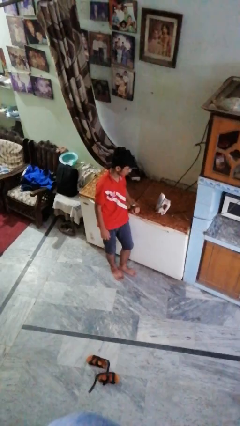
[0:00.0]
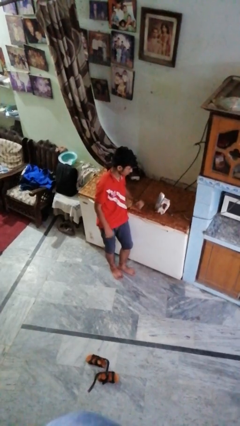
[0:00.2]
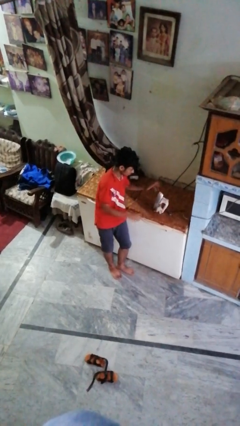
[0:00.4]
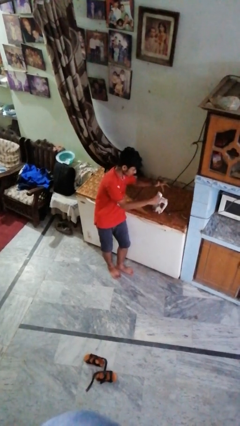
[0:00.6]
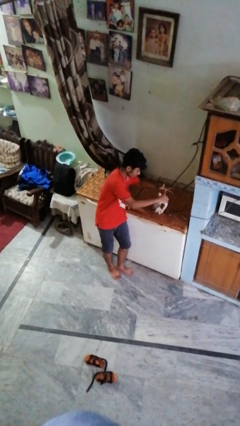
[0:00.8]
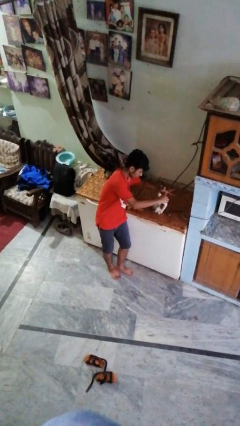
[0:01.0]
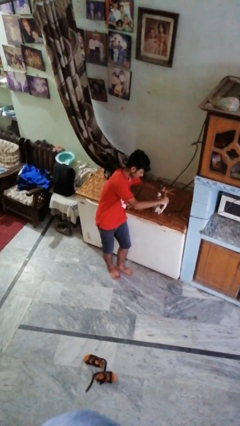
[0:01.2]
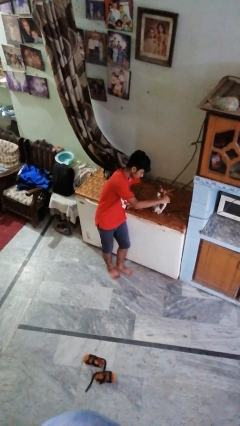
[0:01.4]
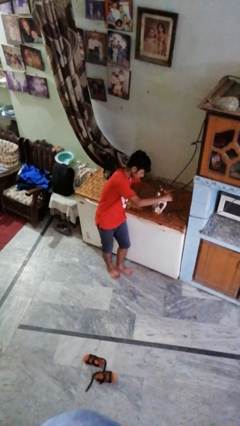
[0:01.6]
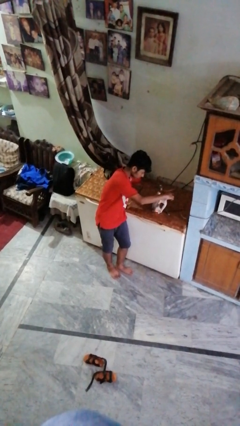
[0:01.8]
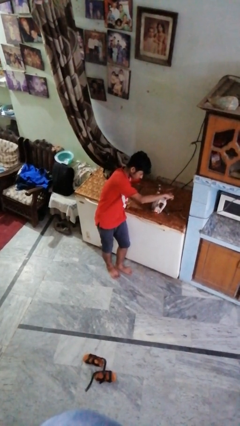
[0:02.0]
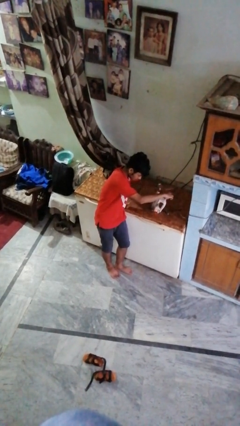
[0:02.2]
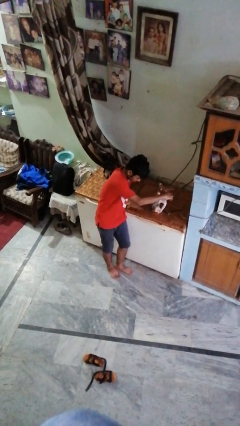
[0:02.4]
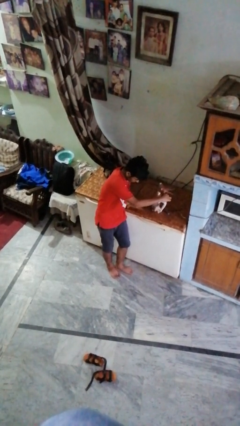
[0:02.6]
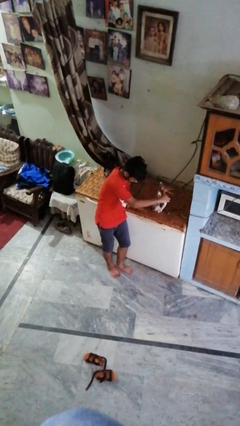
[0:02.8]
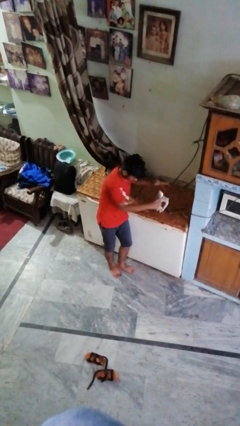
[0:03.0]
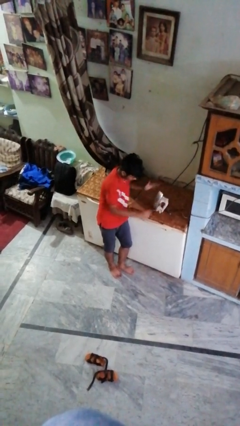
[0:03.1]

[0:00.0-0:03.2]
person adjusts thermostat

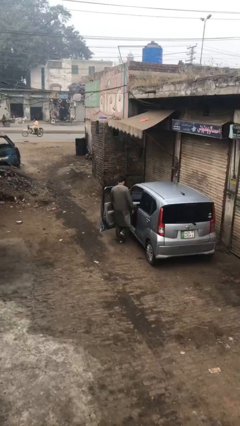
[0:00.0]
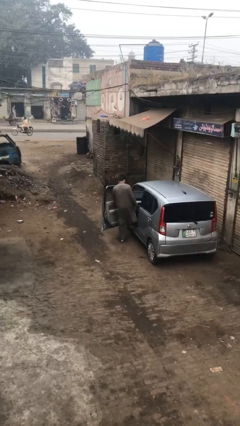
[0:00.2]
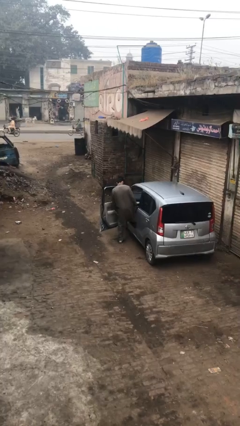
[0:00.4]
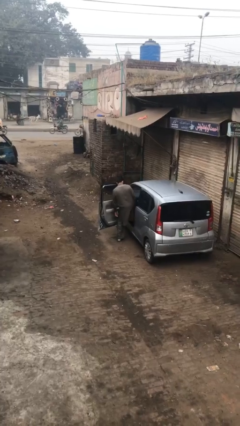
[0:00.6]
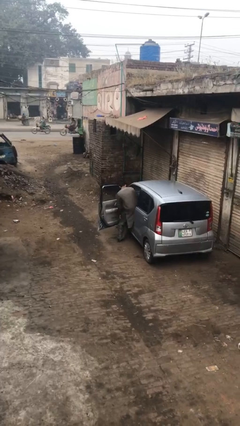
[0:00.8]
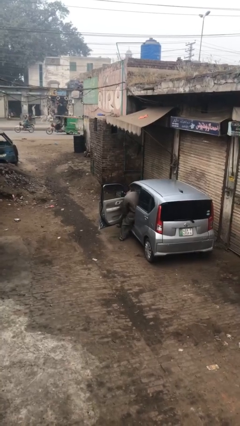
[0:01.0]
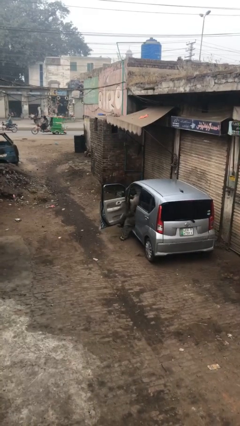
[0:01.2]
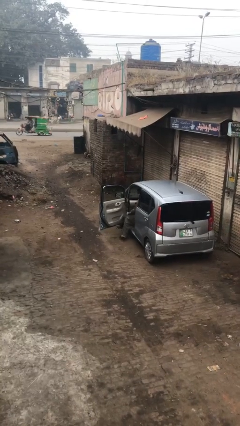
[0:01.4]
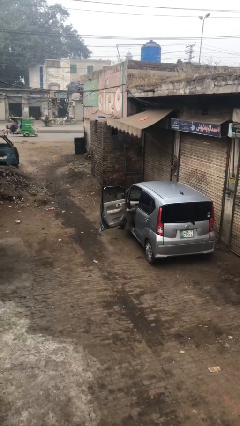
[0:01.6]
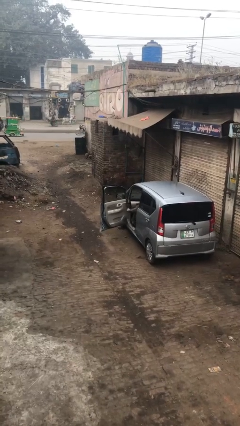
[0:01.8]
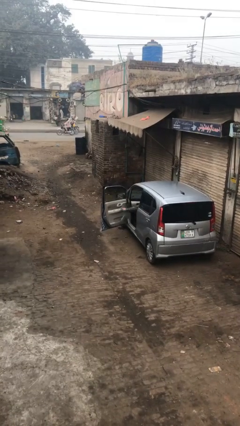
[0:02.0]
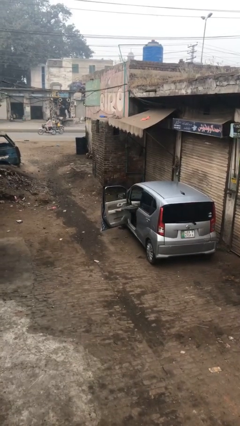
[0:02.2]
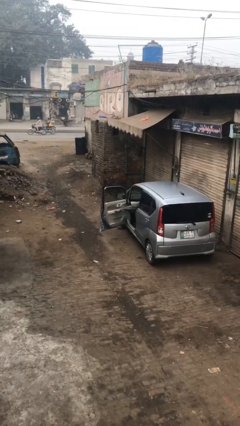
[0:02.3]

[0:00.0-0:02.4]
person enters car

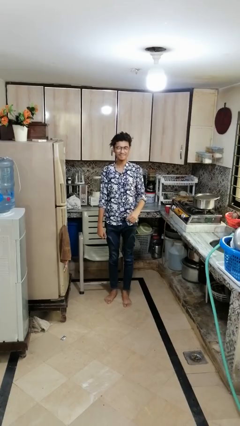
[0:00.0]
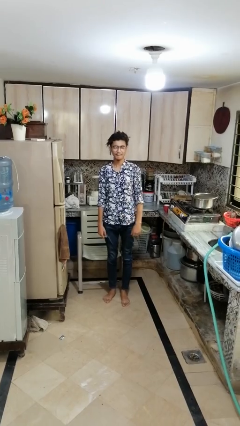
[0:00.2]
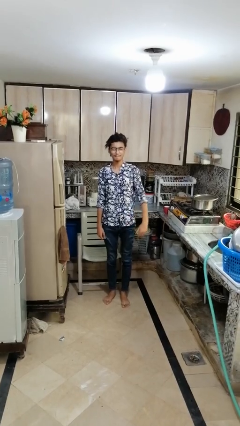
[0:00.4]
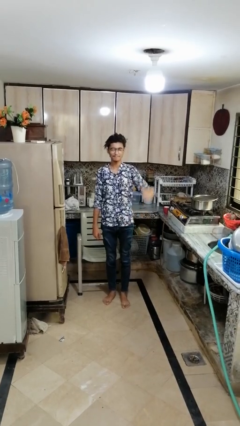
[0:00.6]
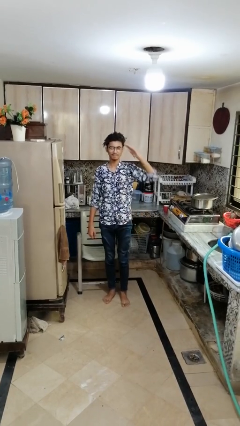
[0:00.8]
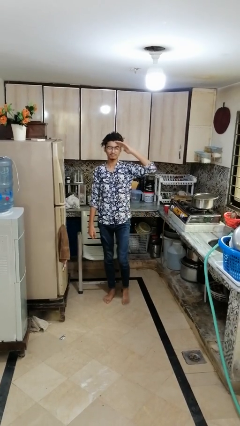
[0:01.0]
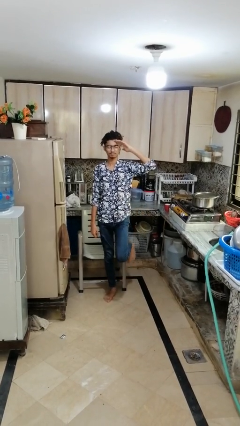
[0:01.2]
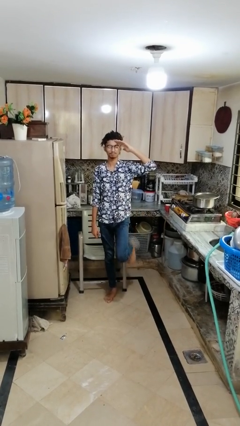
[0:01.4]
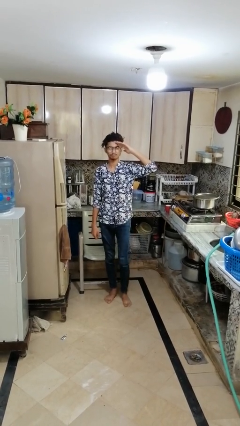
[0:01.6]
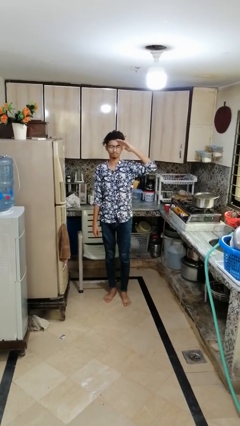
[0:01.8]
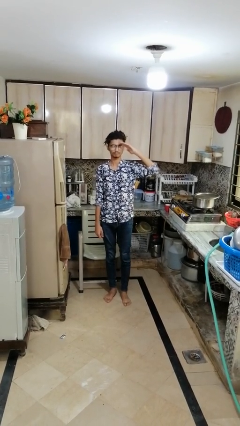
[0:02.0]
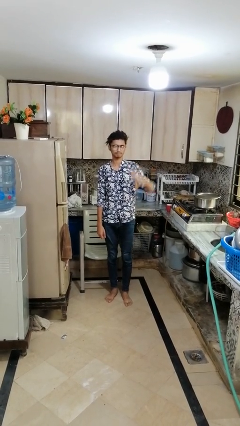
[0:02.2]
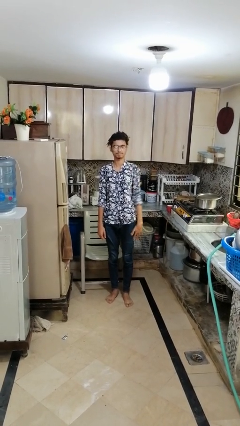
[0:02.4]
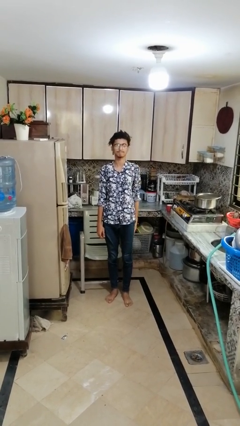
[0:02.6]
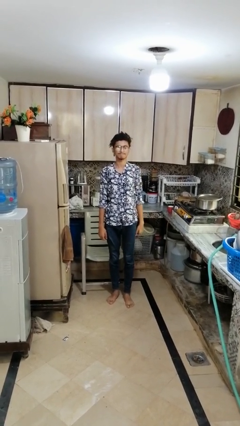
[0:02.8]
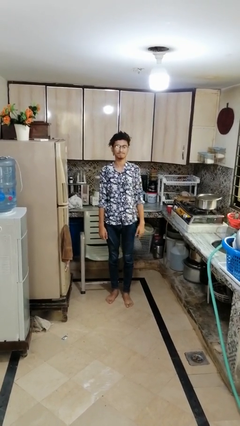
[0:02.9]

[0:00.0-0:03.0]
person salutes

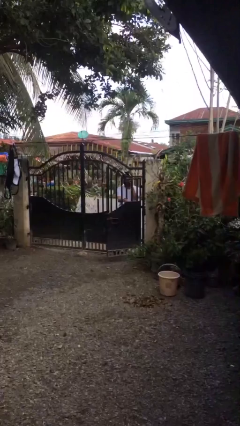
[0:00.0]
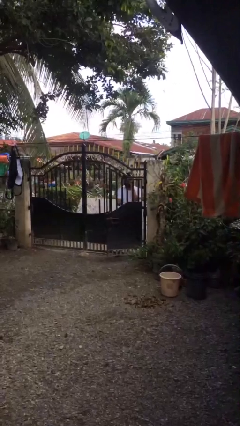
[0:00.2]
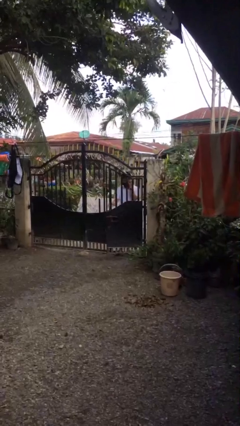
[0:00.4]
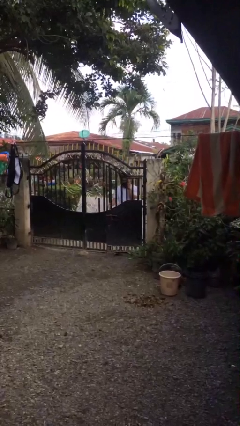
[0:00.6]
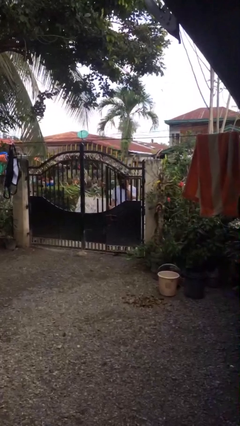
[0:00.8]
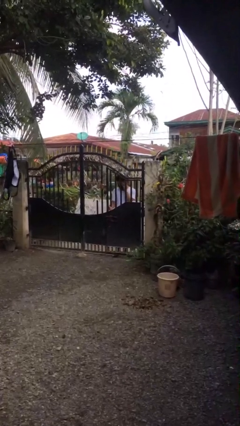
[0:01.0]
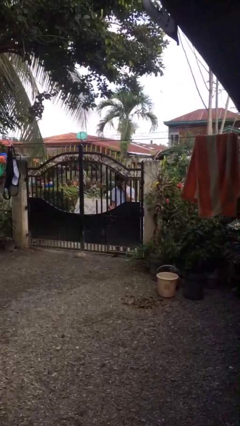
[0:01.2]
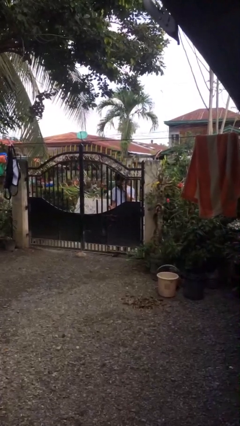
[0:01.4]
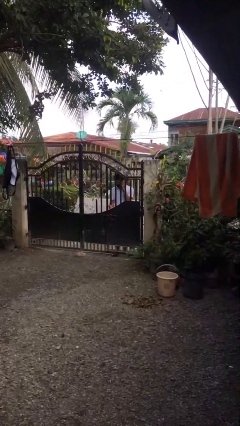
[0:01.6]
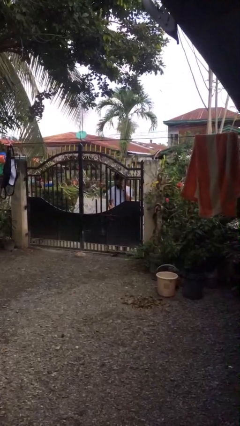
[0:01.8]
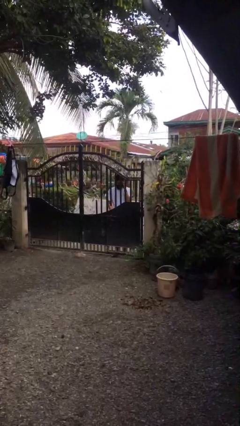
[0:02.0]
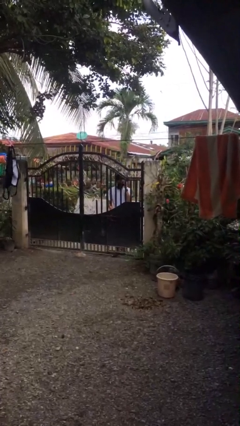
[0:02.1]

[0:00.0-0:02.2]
person closes facility door

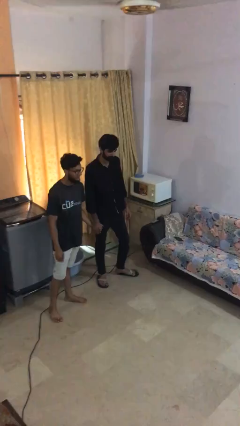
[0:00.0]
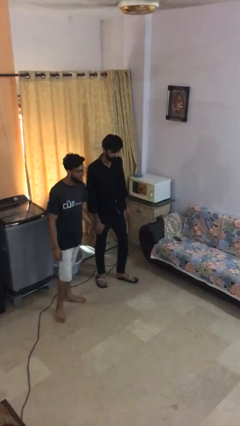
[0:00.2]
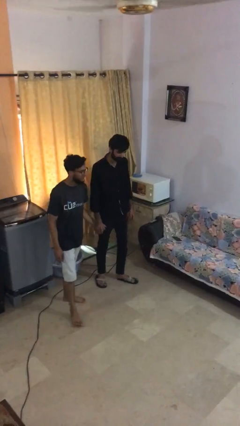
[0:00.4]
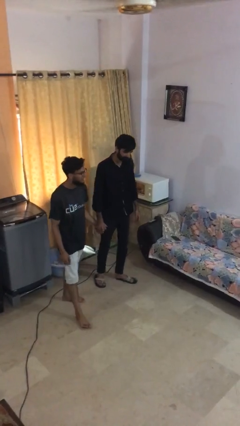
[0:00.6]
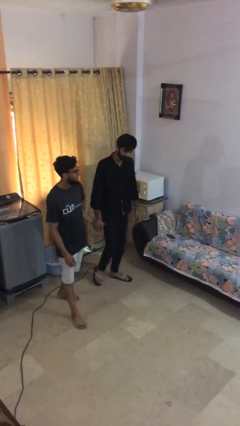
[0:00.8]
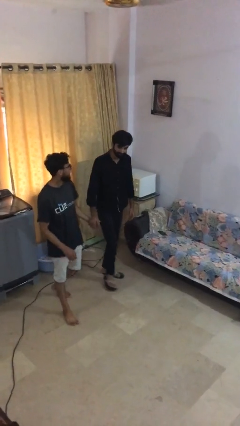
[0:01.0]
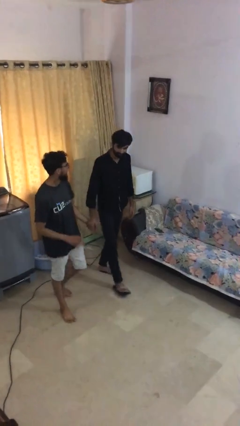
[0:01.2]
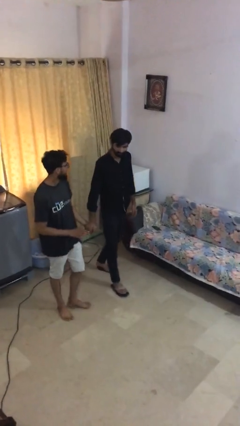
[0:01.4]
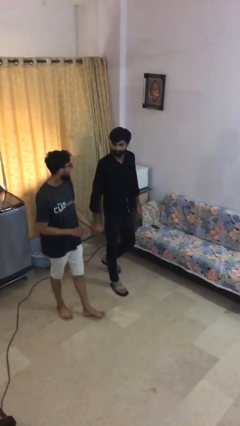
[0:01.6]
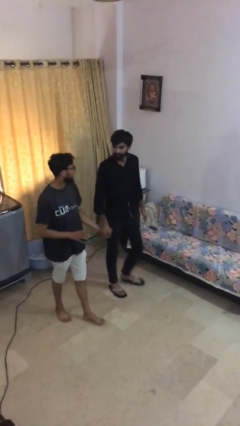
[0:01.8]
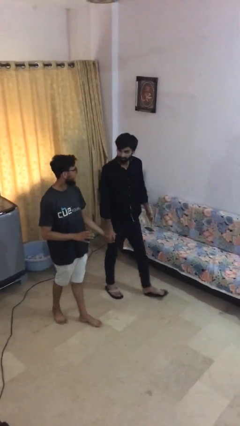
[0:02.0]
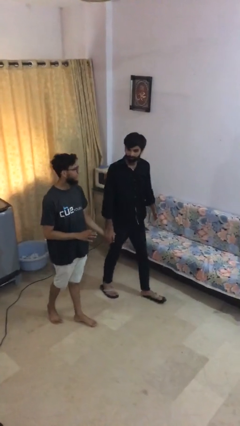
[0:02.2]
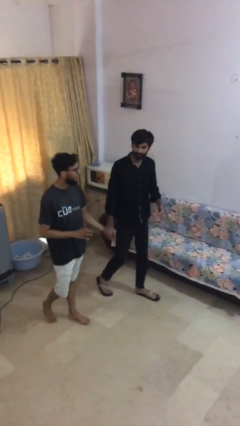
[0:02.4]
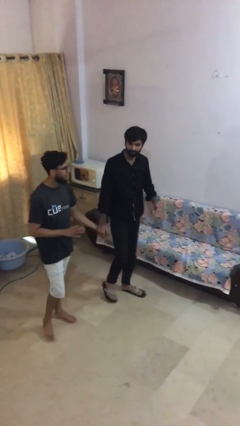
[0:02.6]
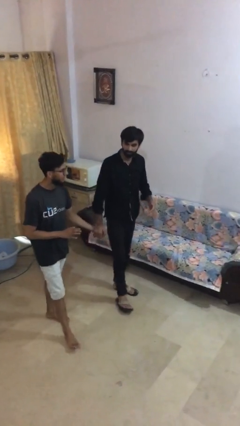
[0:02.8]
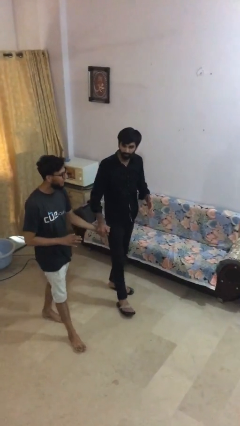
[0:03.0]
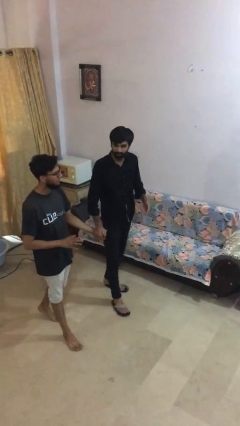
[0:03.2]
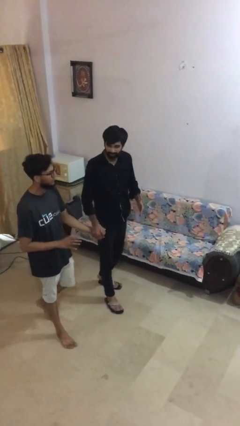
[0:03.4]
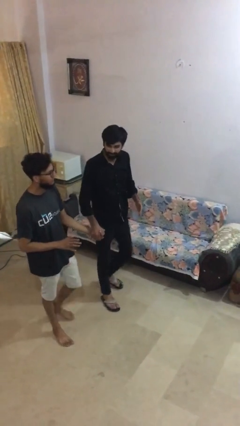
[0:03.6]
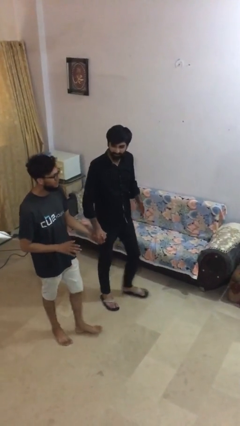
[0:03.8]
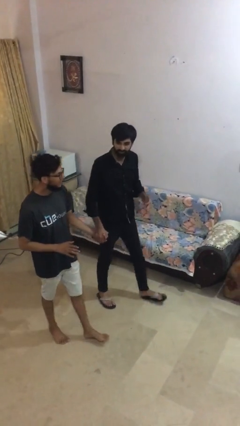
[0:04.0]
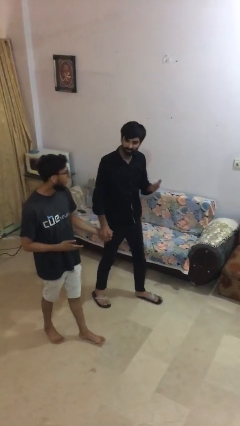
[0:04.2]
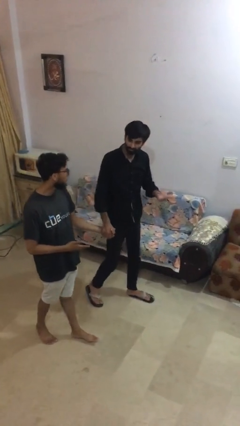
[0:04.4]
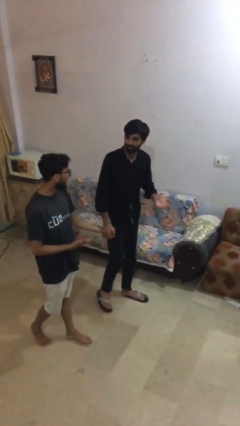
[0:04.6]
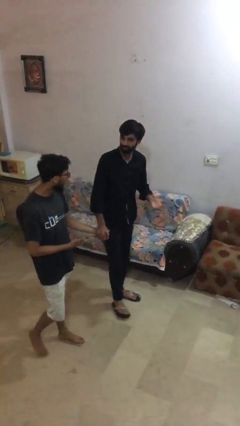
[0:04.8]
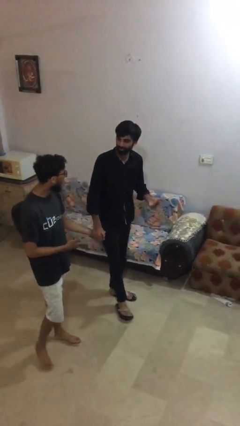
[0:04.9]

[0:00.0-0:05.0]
person holds hand

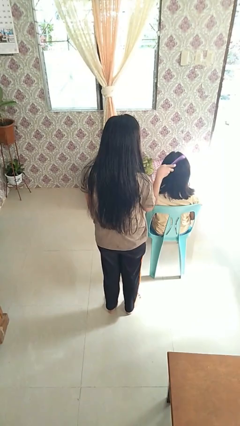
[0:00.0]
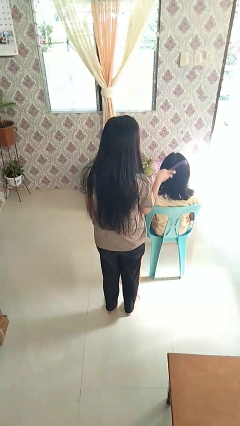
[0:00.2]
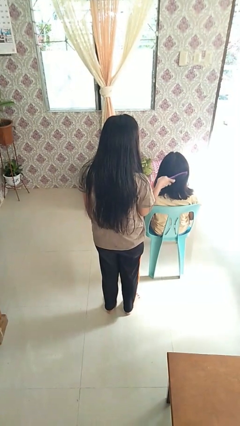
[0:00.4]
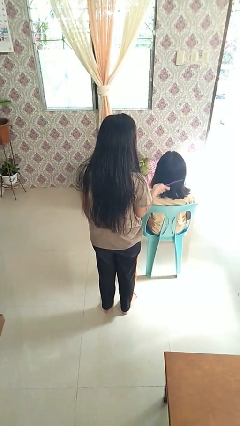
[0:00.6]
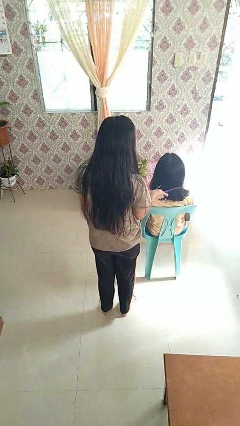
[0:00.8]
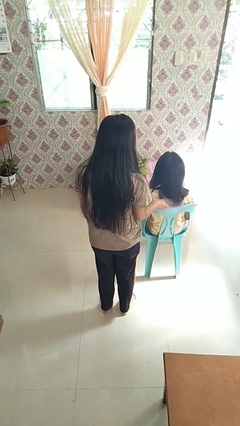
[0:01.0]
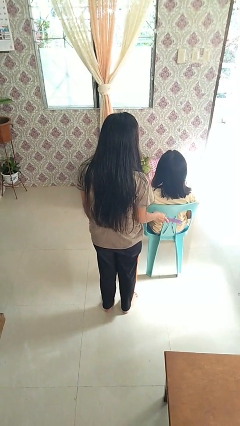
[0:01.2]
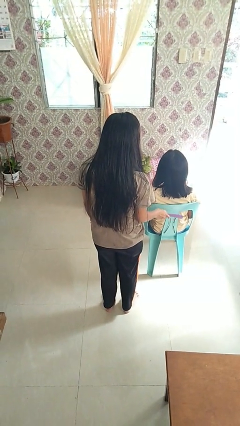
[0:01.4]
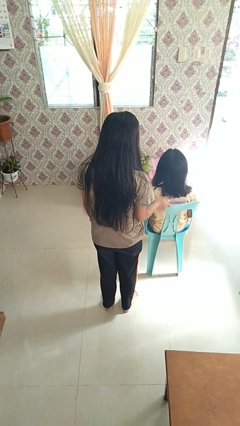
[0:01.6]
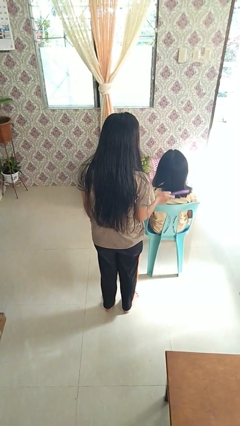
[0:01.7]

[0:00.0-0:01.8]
person brushes hair of person
